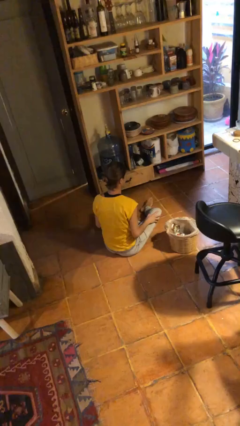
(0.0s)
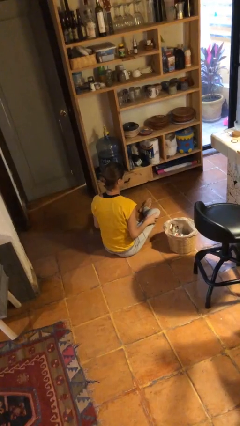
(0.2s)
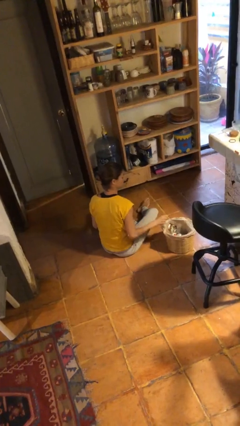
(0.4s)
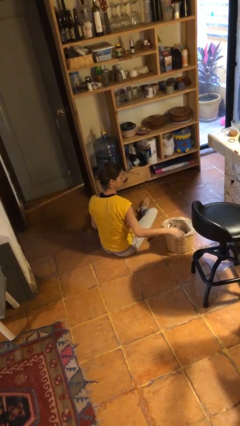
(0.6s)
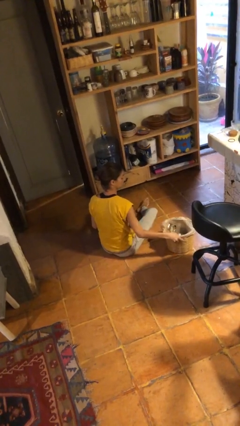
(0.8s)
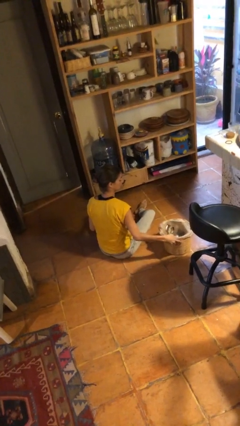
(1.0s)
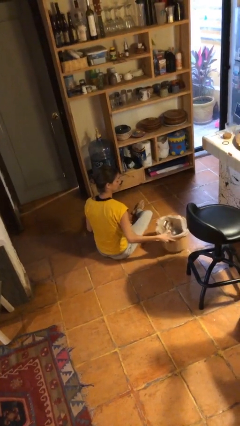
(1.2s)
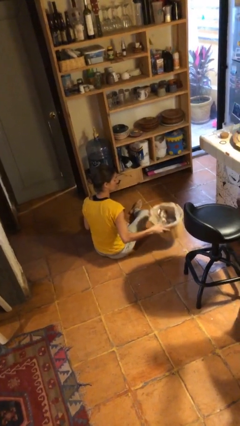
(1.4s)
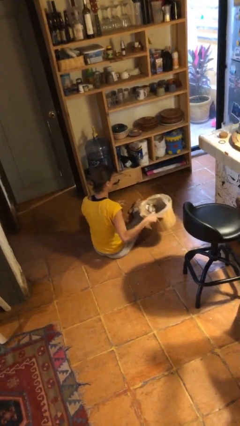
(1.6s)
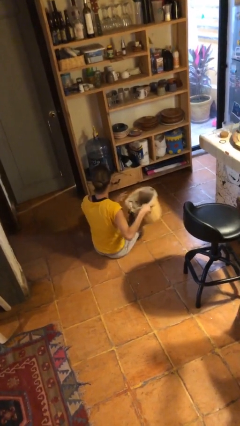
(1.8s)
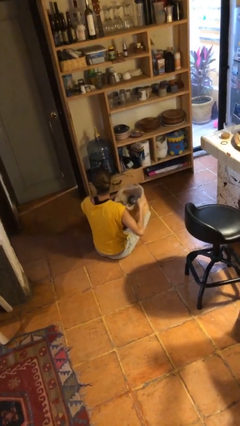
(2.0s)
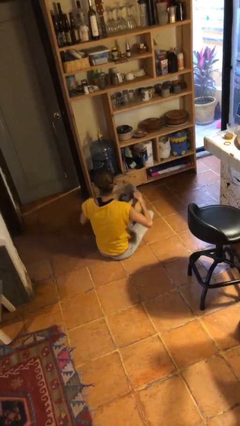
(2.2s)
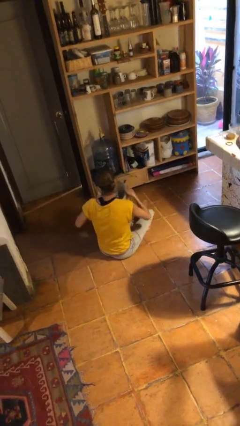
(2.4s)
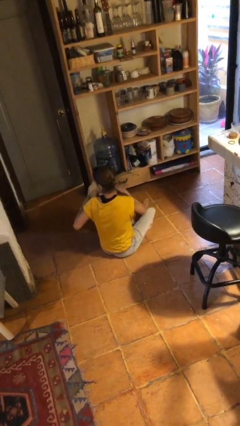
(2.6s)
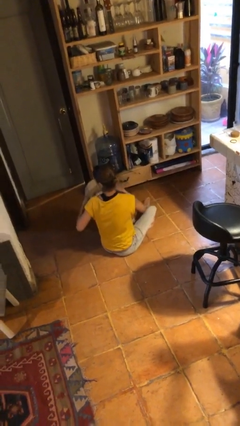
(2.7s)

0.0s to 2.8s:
person picks up object from floor

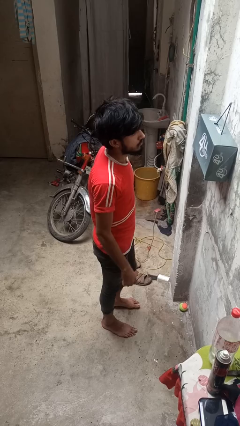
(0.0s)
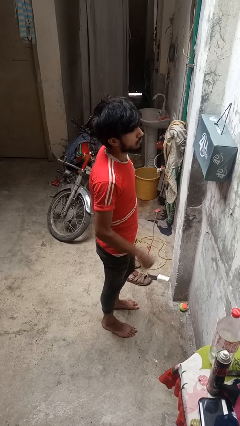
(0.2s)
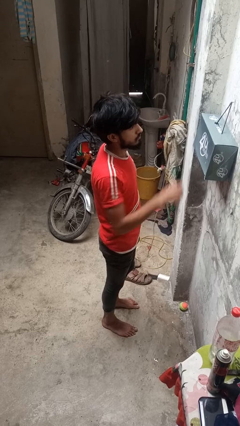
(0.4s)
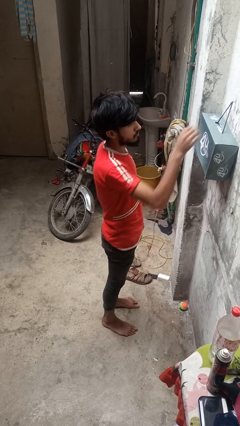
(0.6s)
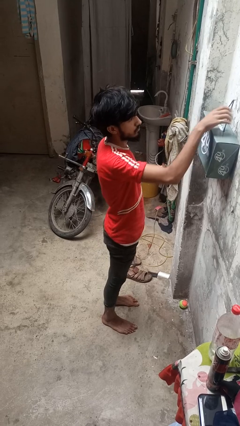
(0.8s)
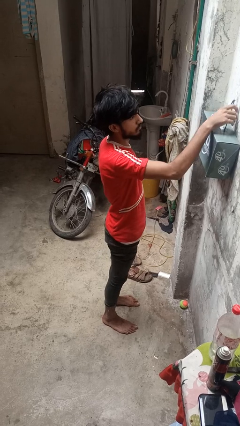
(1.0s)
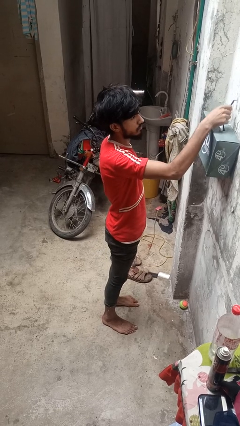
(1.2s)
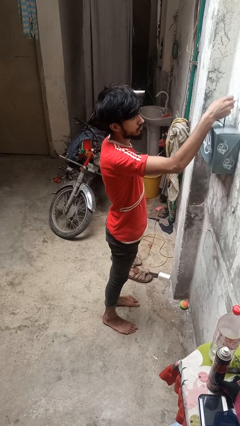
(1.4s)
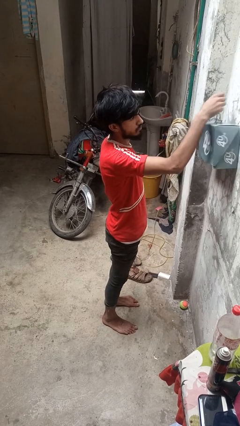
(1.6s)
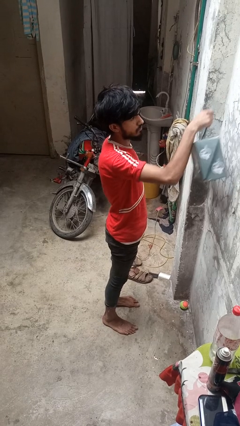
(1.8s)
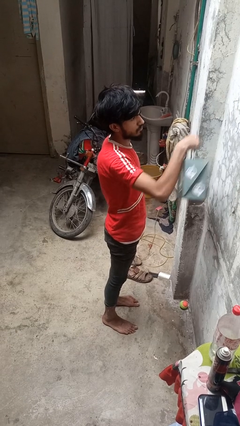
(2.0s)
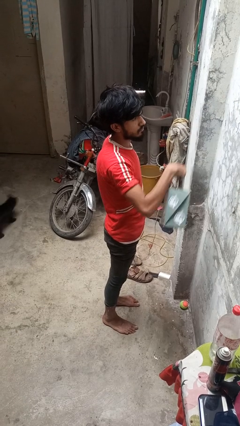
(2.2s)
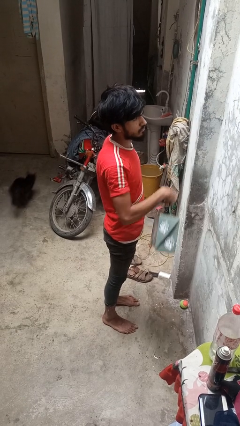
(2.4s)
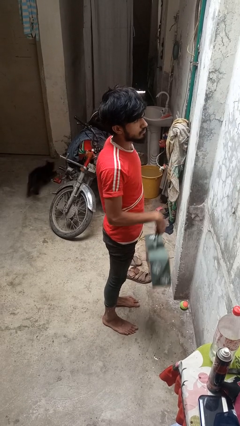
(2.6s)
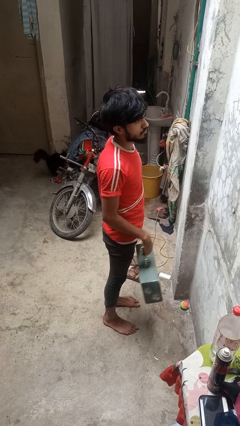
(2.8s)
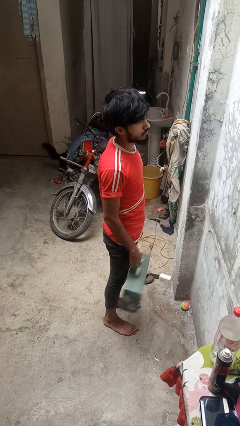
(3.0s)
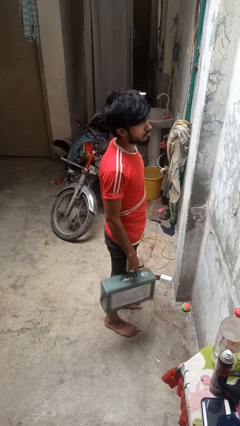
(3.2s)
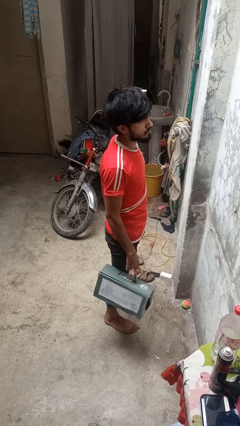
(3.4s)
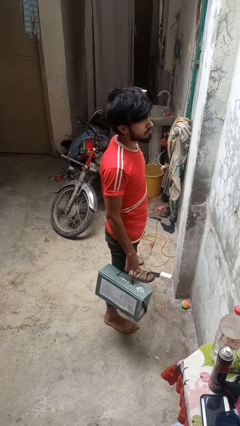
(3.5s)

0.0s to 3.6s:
person takes down smoke detector

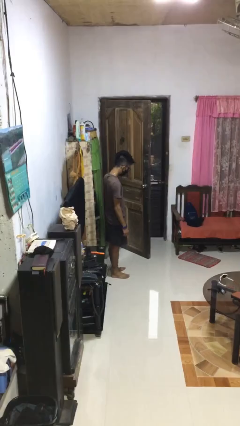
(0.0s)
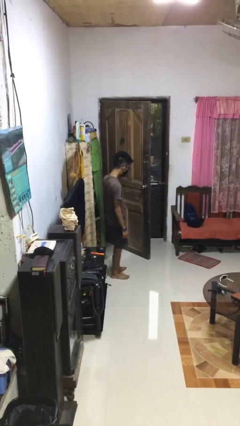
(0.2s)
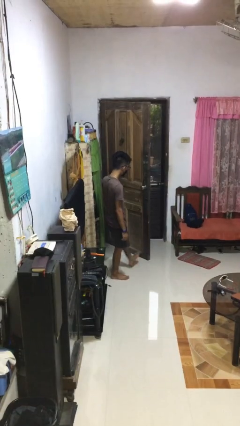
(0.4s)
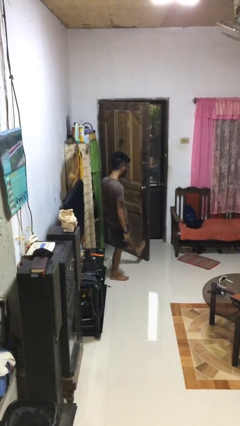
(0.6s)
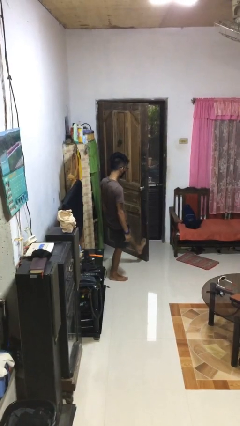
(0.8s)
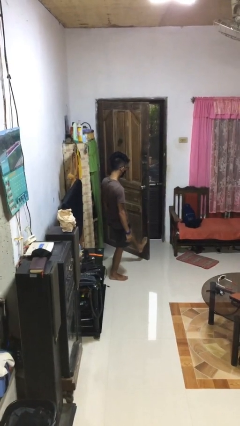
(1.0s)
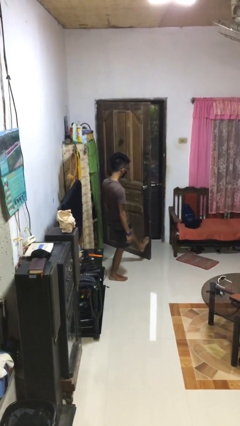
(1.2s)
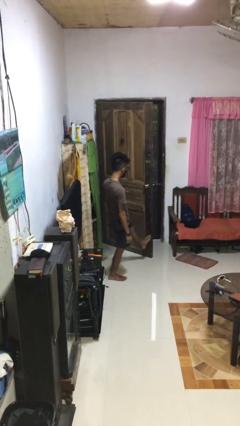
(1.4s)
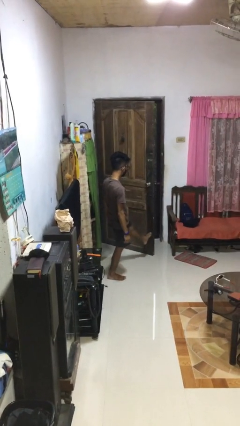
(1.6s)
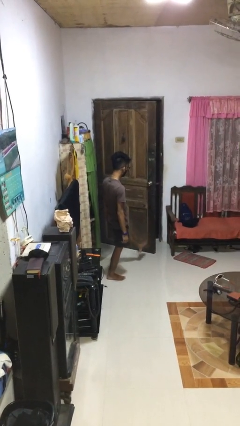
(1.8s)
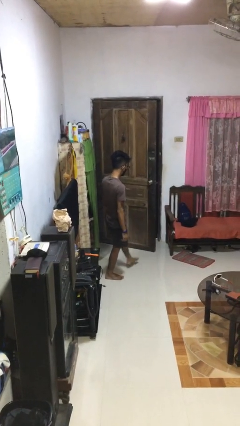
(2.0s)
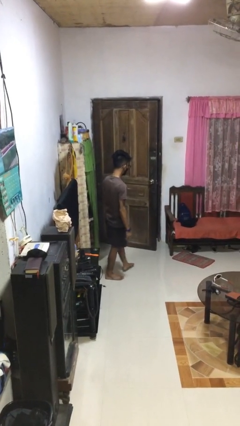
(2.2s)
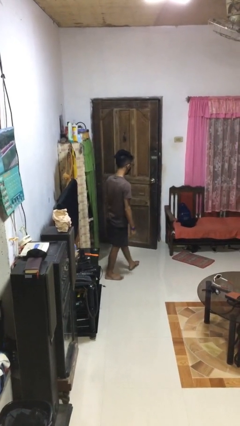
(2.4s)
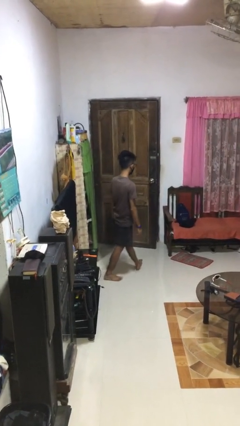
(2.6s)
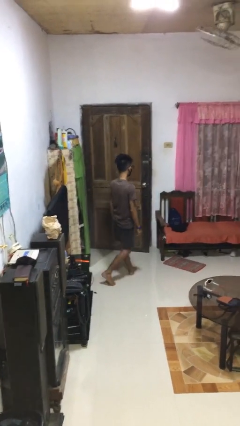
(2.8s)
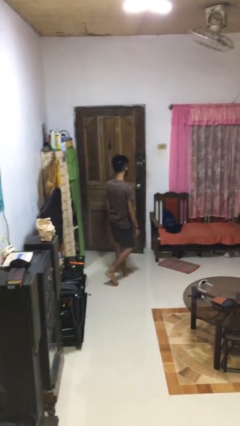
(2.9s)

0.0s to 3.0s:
person closes door with foot

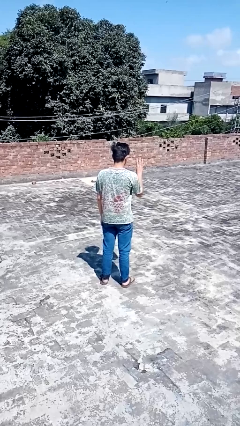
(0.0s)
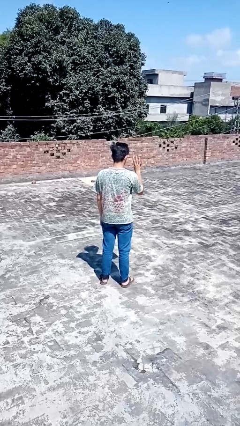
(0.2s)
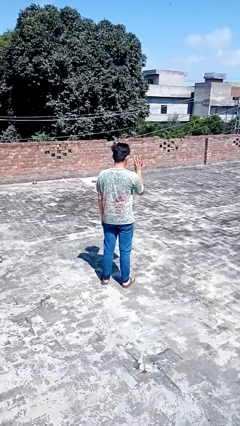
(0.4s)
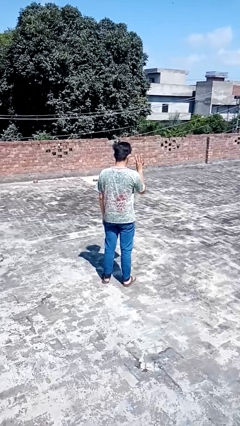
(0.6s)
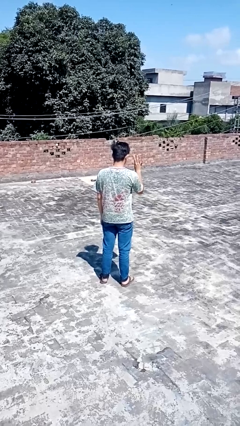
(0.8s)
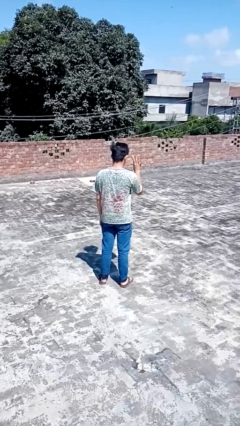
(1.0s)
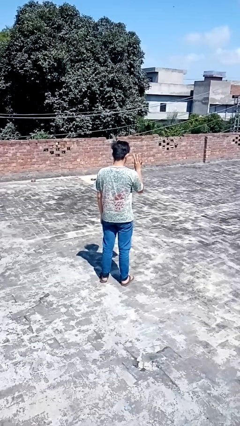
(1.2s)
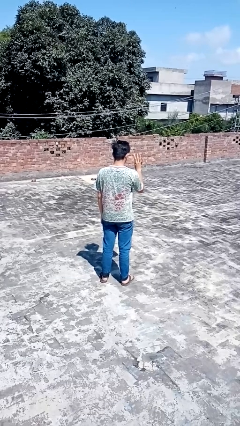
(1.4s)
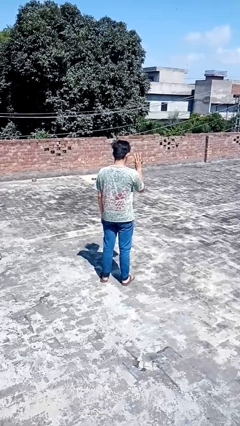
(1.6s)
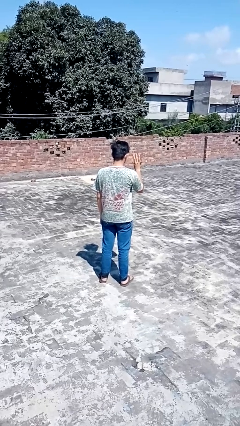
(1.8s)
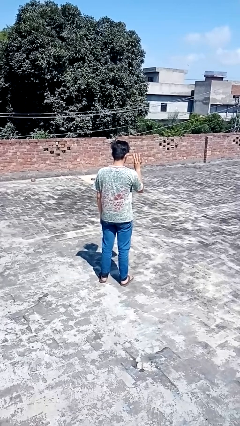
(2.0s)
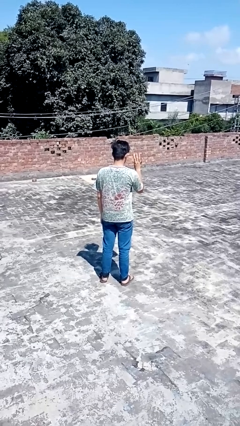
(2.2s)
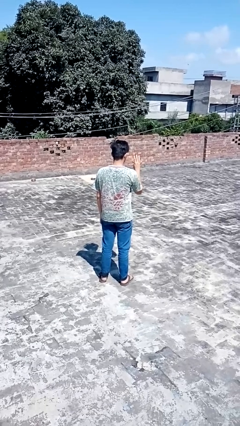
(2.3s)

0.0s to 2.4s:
person gestures number four

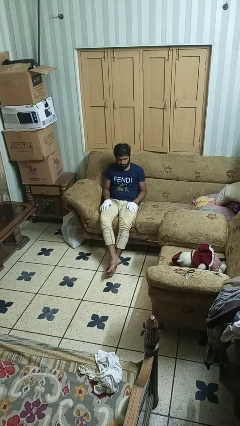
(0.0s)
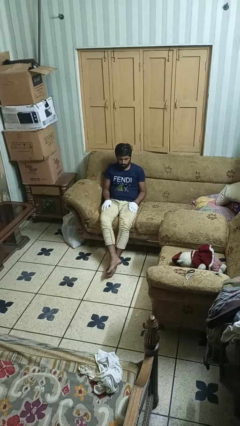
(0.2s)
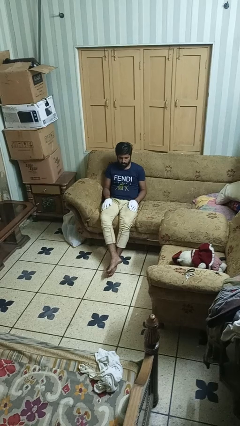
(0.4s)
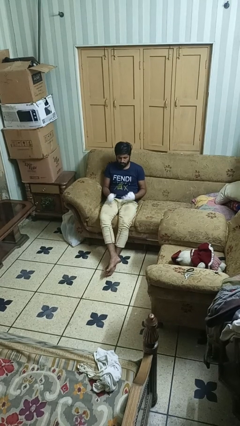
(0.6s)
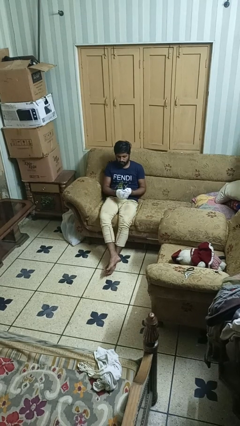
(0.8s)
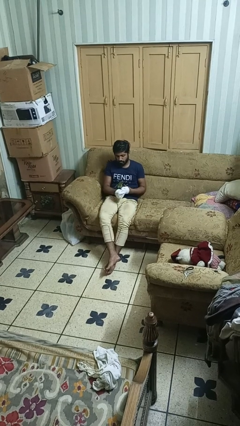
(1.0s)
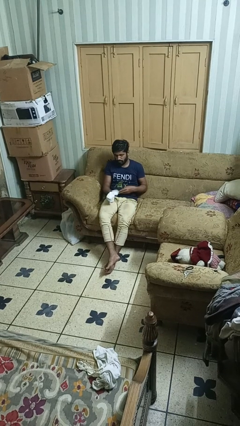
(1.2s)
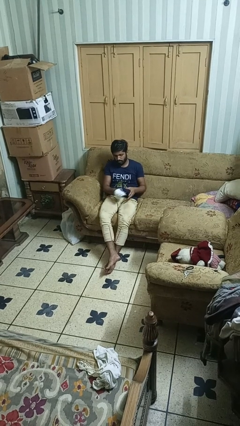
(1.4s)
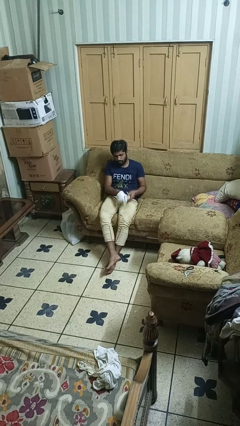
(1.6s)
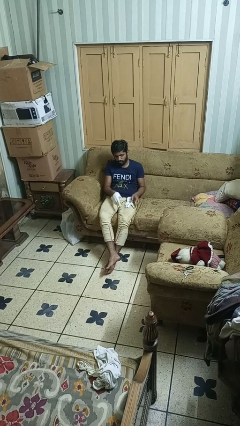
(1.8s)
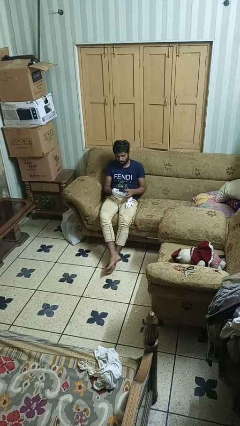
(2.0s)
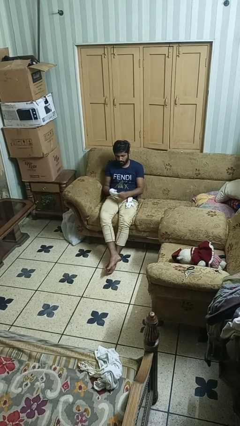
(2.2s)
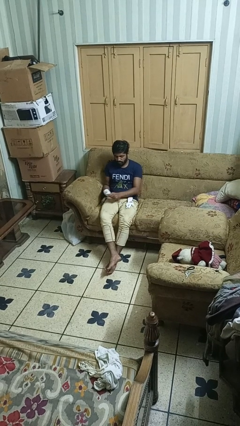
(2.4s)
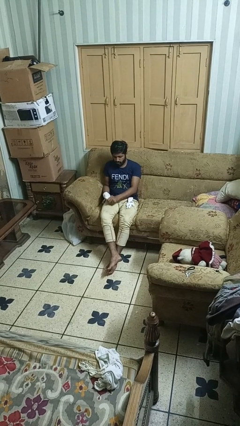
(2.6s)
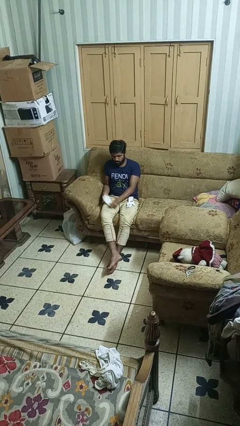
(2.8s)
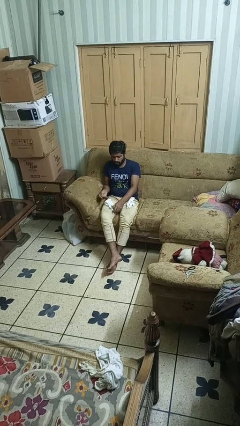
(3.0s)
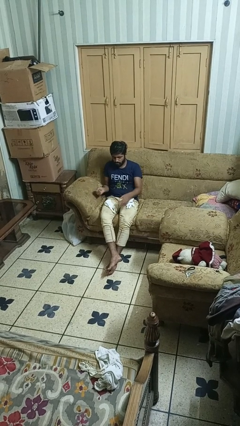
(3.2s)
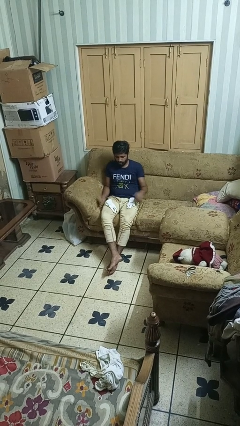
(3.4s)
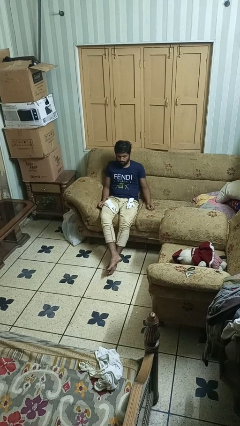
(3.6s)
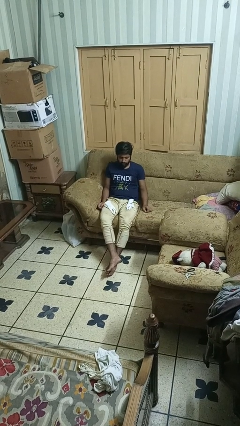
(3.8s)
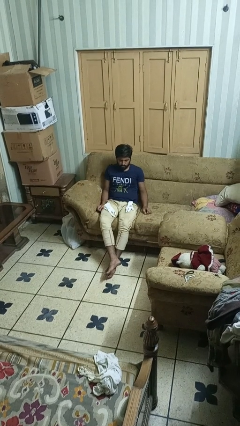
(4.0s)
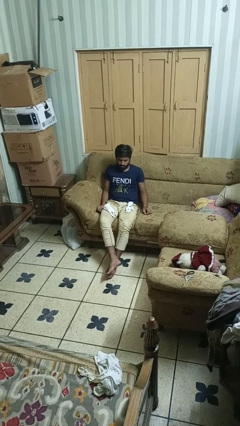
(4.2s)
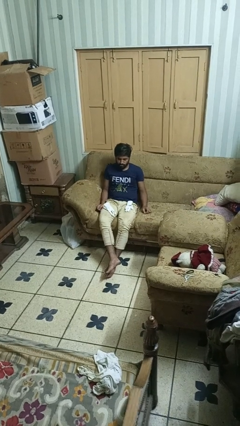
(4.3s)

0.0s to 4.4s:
person takes off gloves

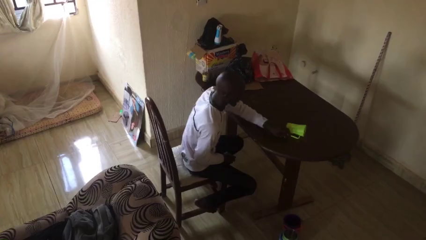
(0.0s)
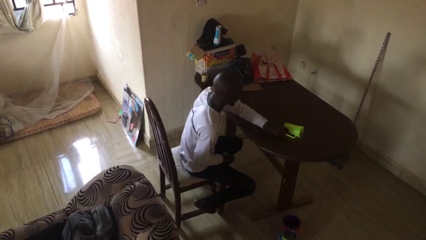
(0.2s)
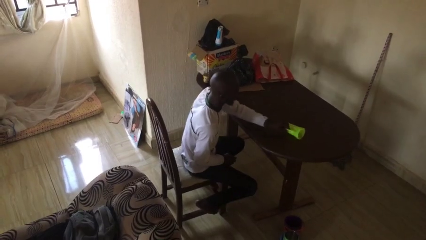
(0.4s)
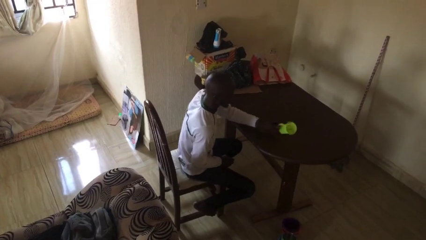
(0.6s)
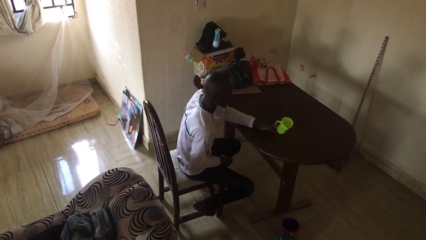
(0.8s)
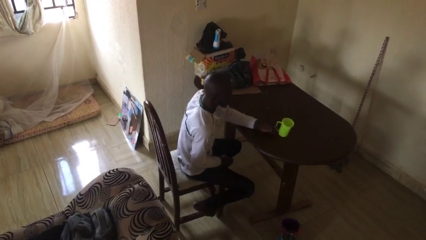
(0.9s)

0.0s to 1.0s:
person sets upright glass

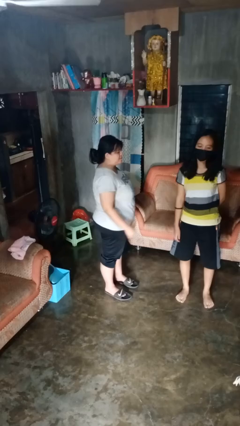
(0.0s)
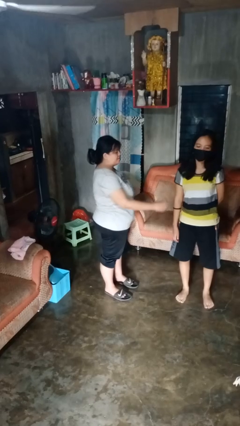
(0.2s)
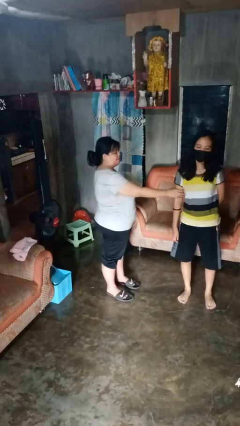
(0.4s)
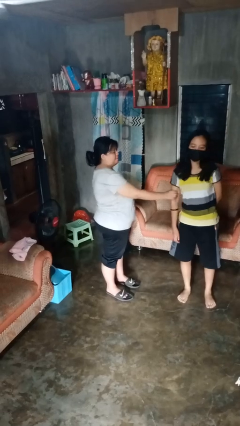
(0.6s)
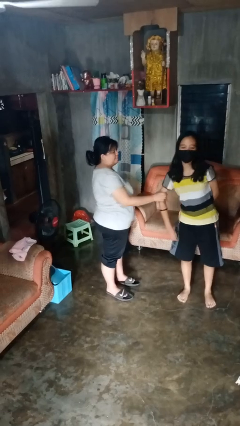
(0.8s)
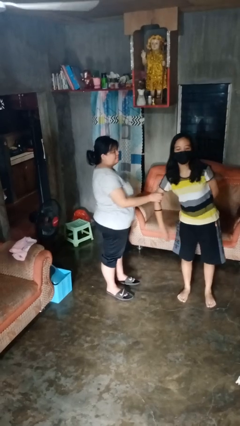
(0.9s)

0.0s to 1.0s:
person grabs person by bicep
